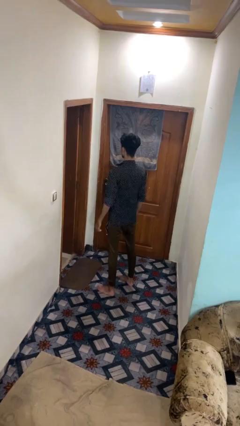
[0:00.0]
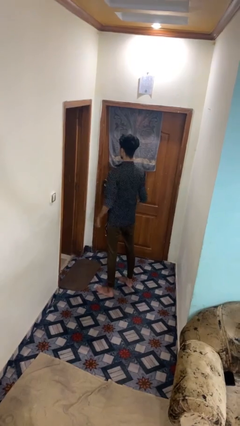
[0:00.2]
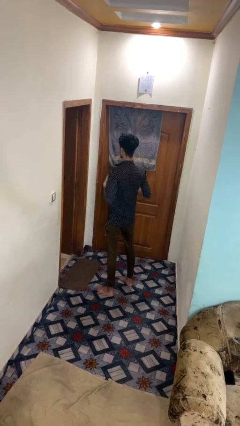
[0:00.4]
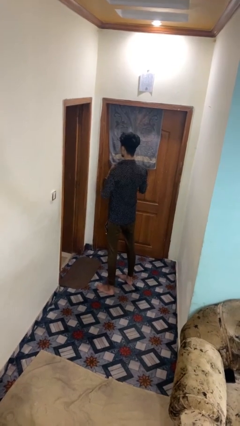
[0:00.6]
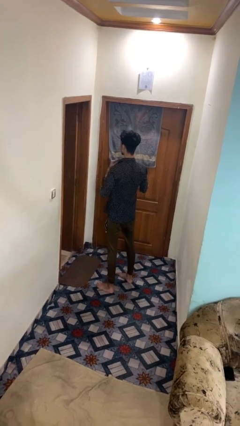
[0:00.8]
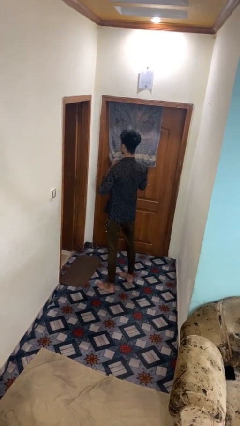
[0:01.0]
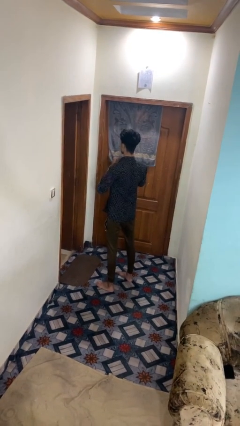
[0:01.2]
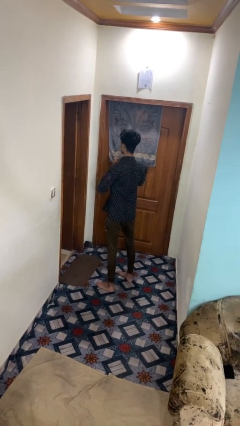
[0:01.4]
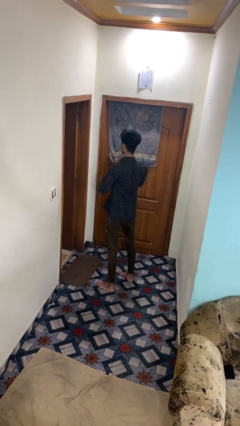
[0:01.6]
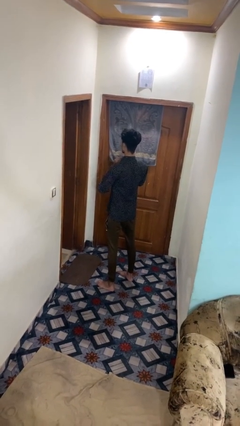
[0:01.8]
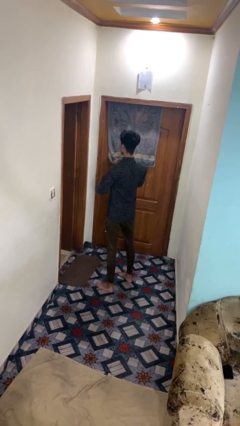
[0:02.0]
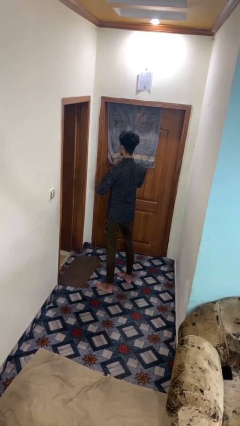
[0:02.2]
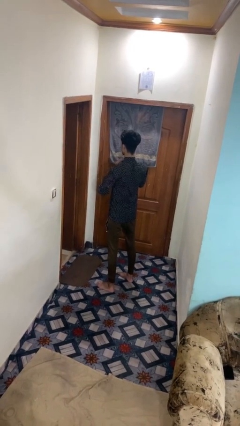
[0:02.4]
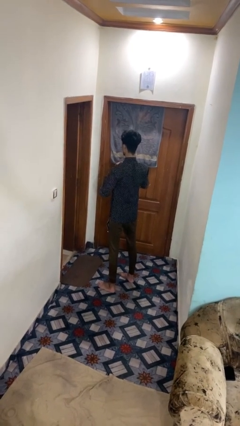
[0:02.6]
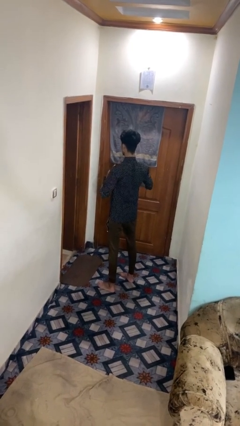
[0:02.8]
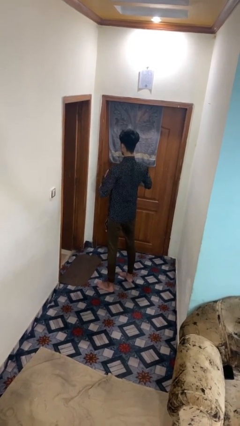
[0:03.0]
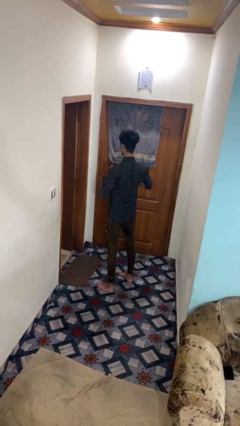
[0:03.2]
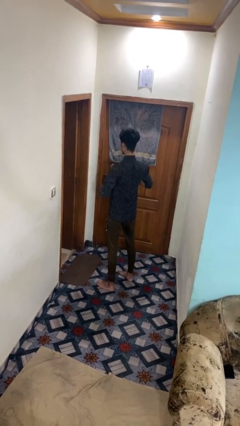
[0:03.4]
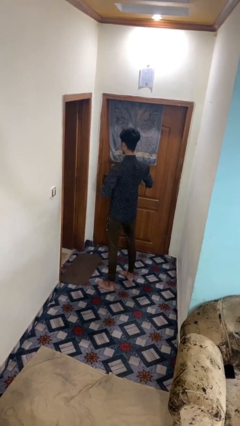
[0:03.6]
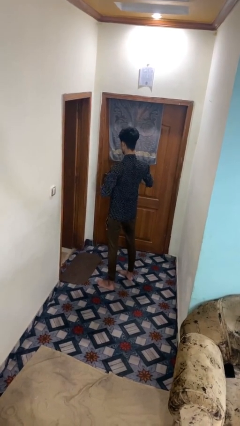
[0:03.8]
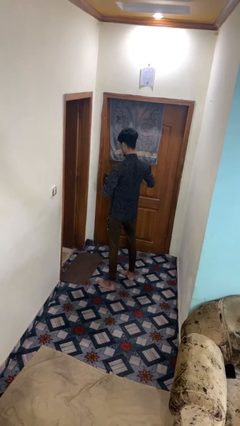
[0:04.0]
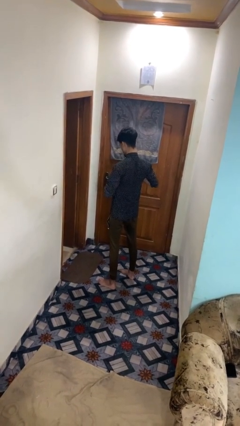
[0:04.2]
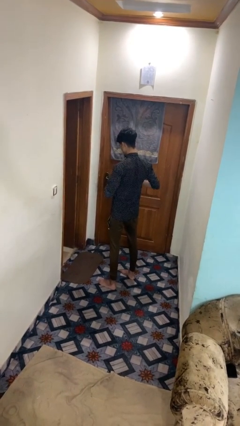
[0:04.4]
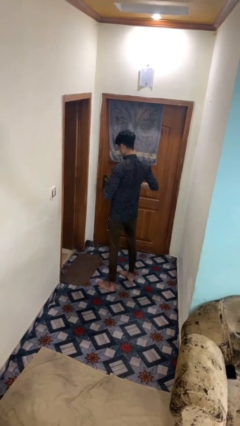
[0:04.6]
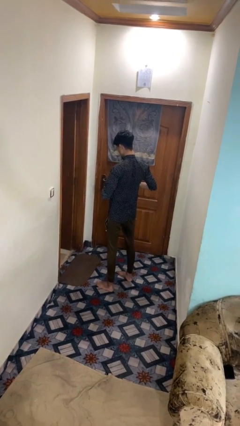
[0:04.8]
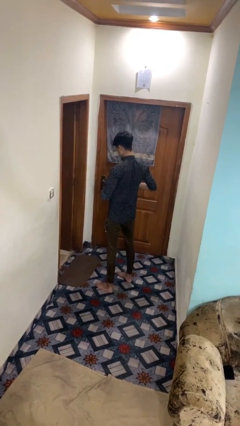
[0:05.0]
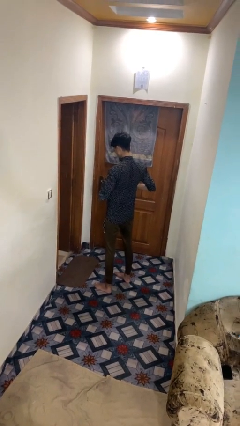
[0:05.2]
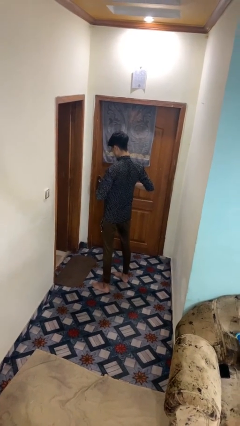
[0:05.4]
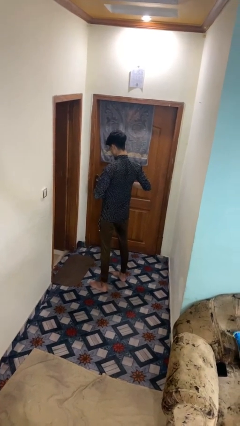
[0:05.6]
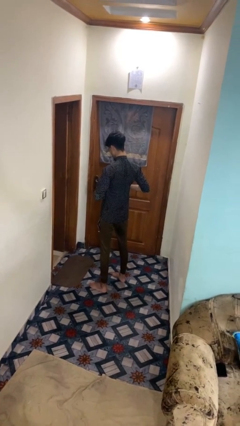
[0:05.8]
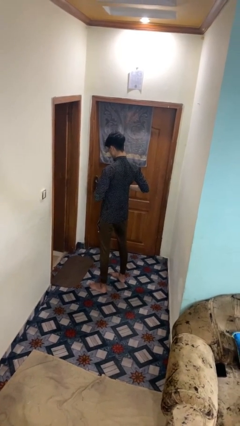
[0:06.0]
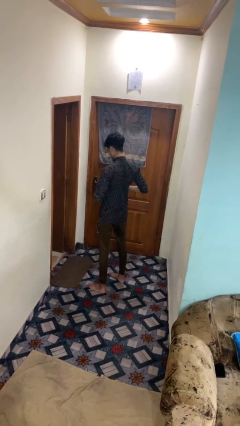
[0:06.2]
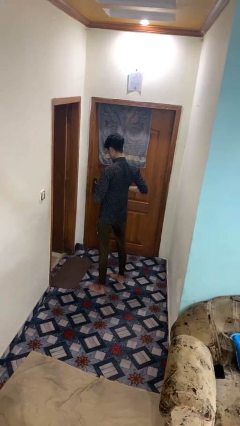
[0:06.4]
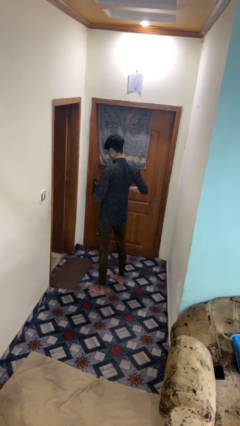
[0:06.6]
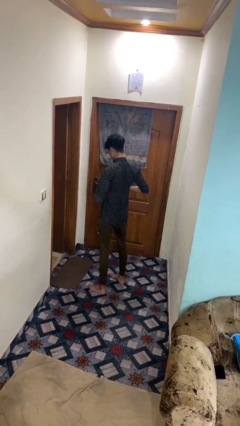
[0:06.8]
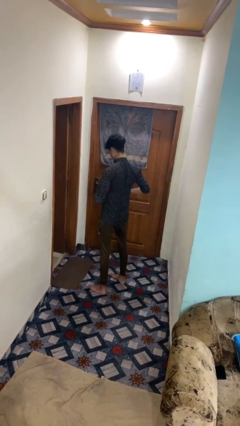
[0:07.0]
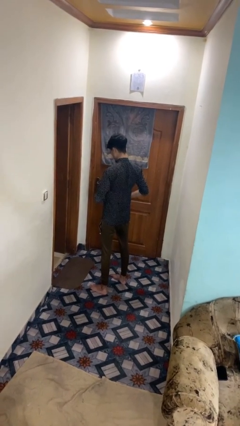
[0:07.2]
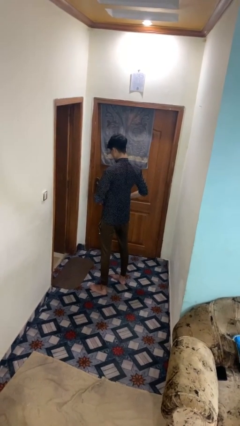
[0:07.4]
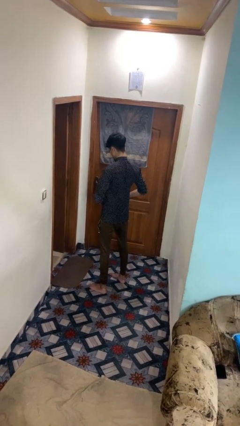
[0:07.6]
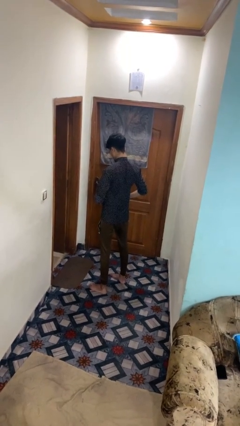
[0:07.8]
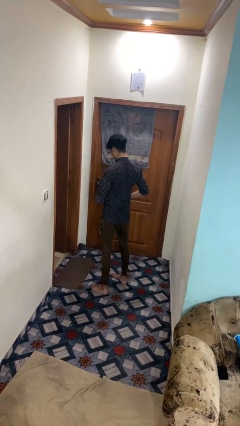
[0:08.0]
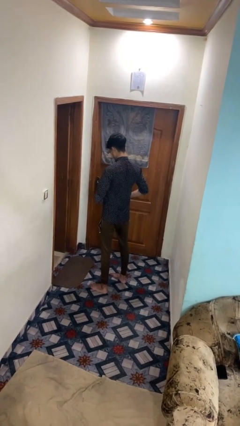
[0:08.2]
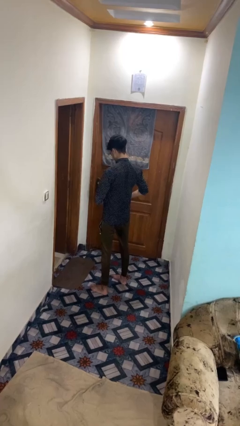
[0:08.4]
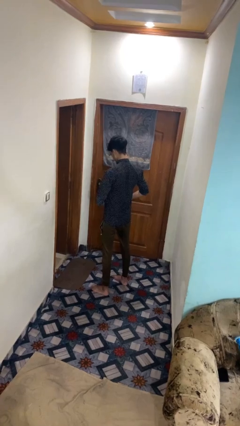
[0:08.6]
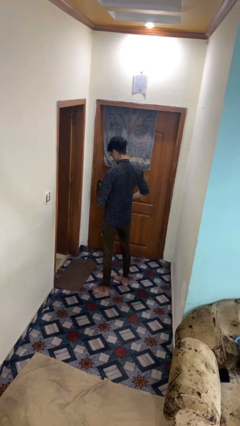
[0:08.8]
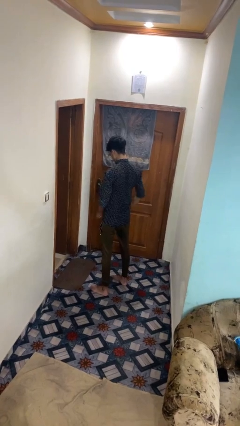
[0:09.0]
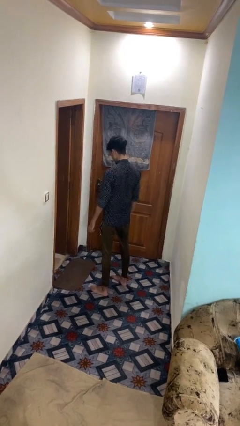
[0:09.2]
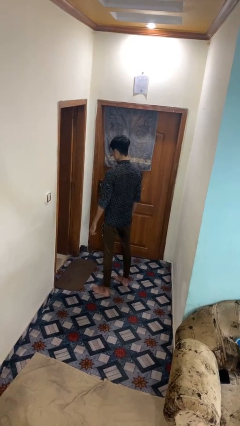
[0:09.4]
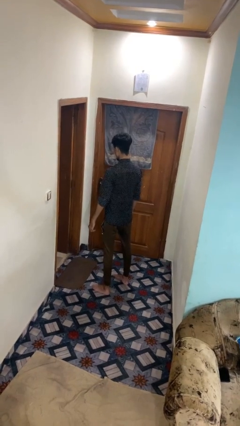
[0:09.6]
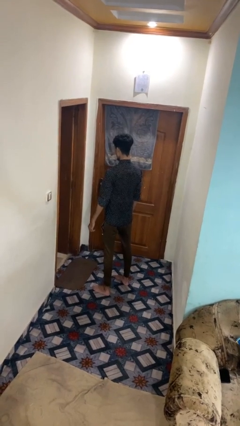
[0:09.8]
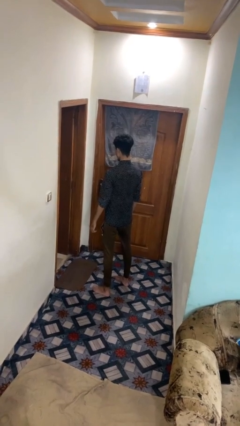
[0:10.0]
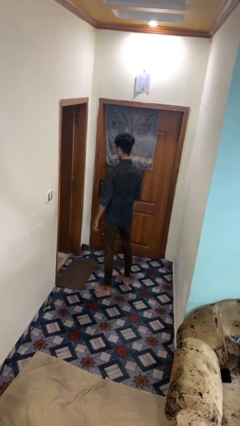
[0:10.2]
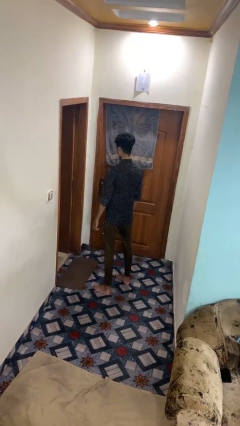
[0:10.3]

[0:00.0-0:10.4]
person buttons shirt

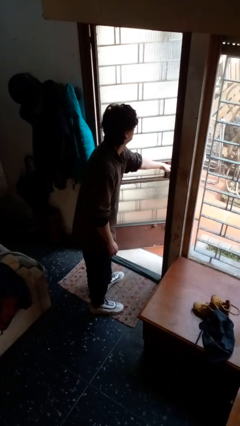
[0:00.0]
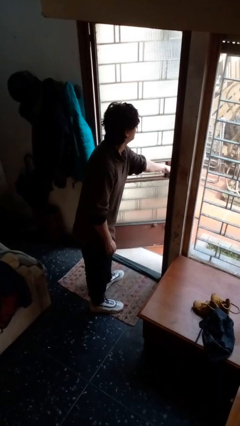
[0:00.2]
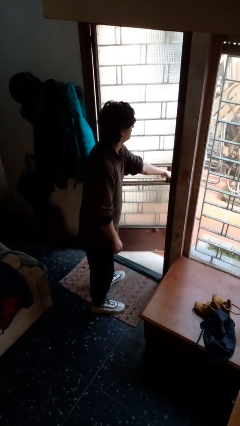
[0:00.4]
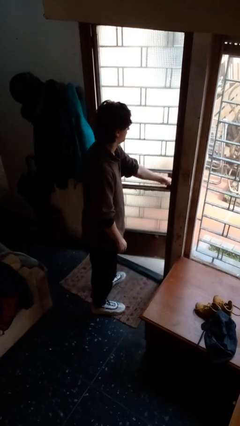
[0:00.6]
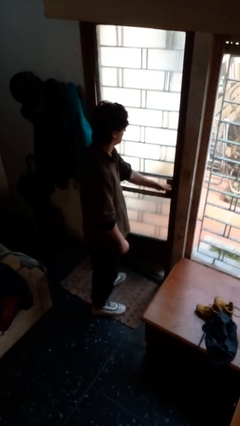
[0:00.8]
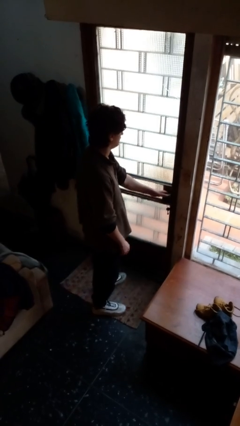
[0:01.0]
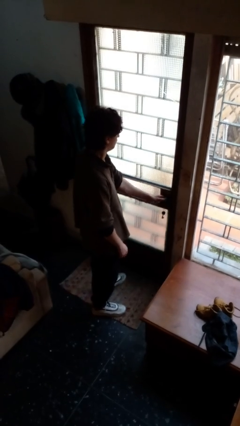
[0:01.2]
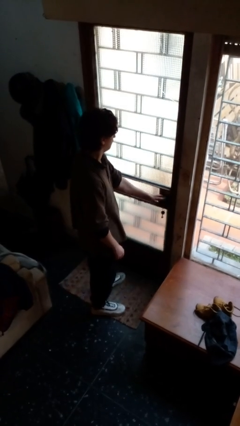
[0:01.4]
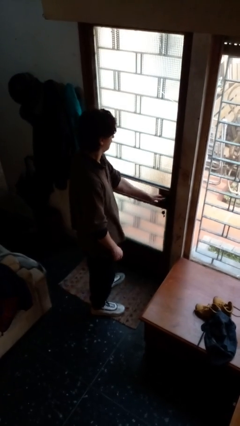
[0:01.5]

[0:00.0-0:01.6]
person closes facility door

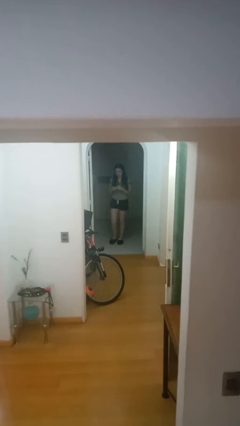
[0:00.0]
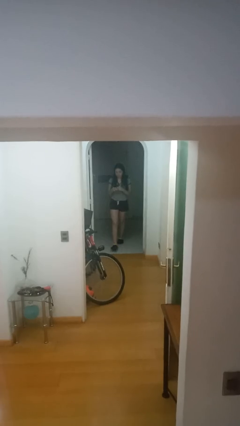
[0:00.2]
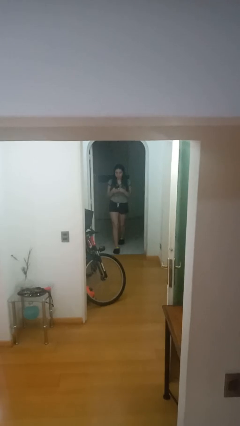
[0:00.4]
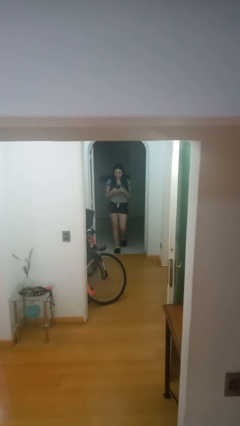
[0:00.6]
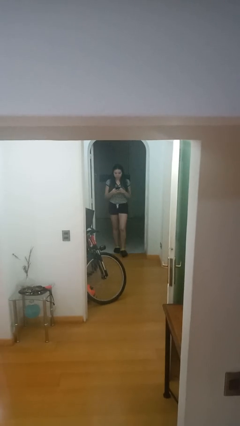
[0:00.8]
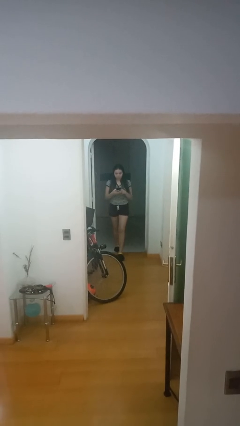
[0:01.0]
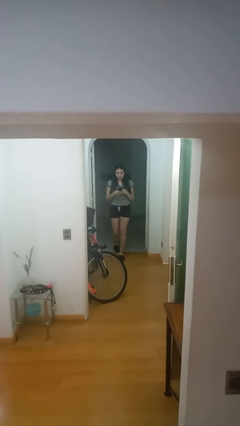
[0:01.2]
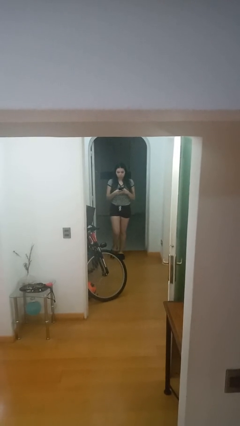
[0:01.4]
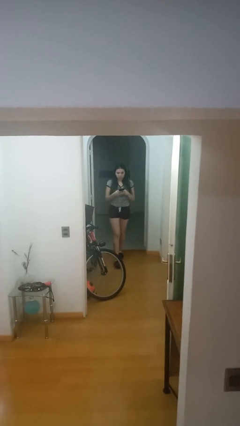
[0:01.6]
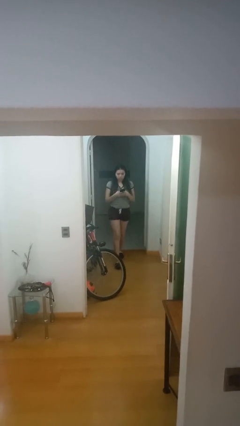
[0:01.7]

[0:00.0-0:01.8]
person enters scene through structure

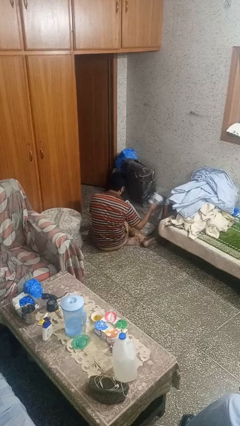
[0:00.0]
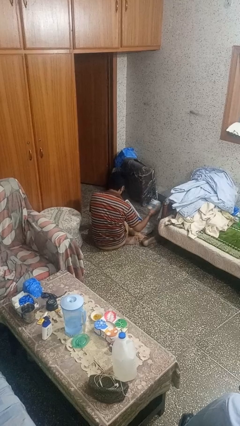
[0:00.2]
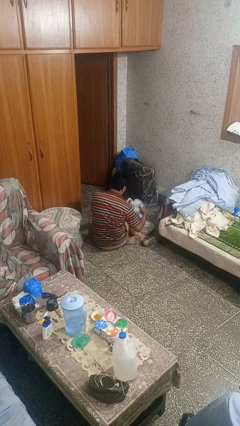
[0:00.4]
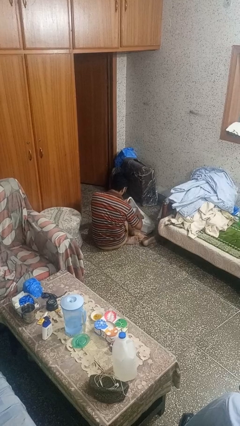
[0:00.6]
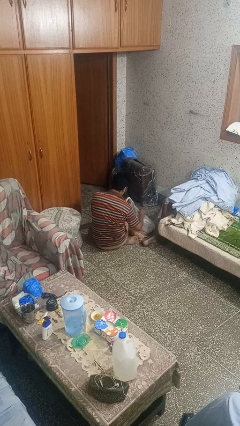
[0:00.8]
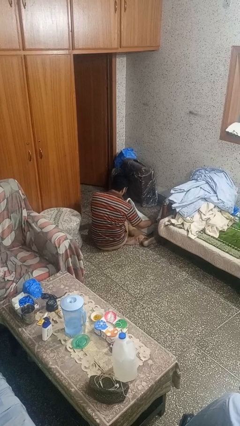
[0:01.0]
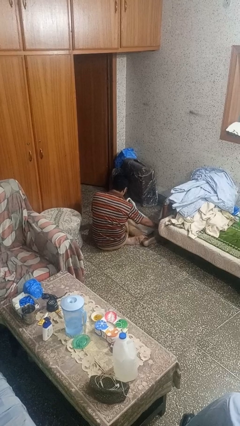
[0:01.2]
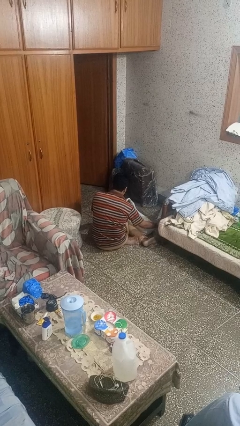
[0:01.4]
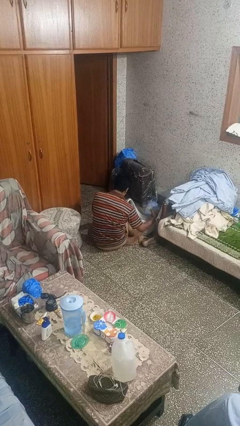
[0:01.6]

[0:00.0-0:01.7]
person puts object into bag

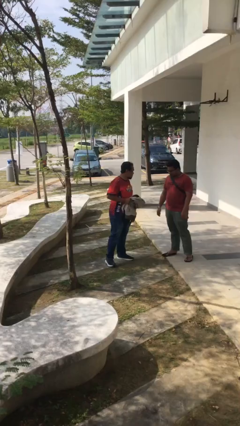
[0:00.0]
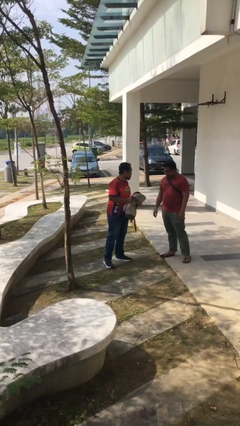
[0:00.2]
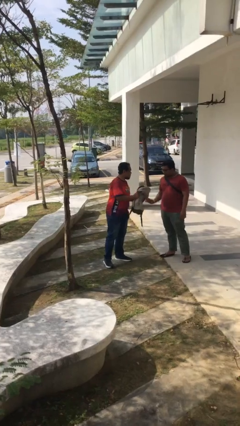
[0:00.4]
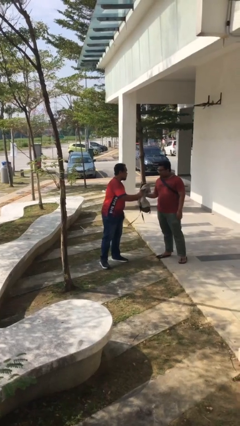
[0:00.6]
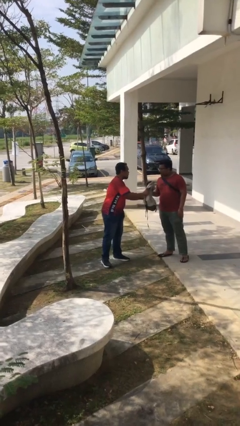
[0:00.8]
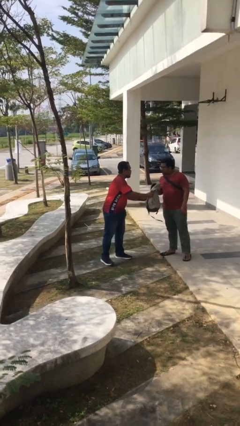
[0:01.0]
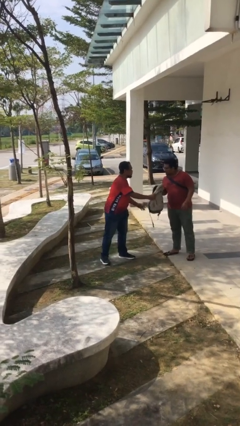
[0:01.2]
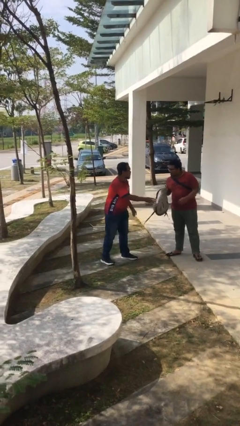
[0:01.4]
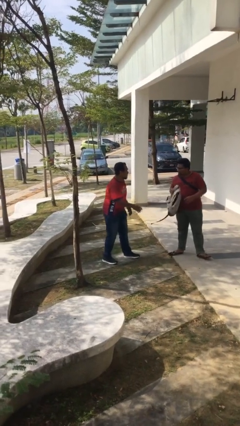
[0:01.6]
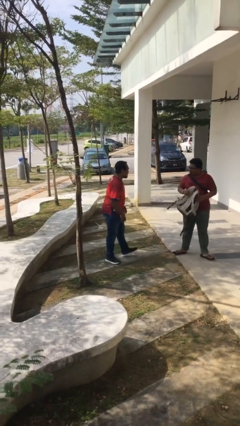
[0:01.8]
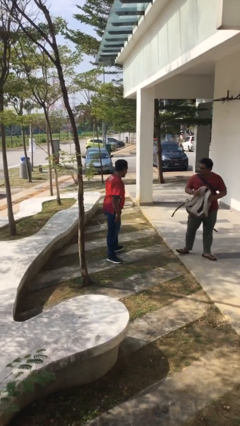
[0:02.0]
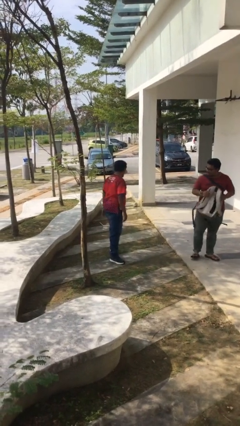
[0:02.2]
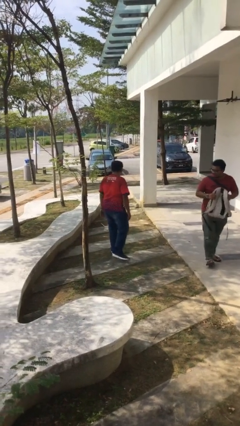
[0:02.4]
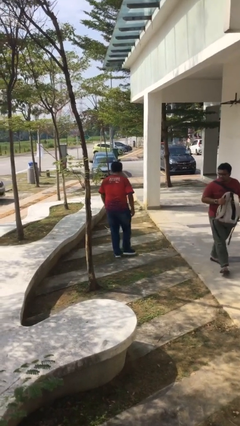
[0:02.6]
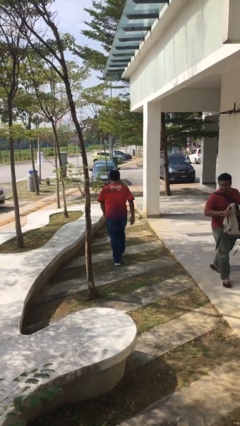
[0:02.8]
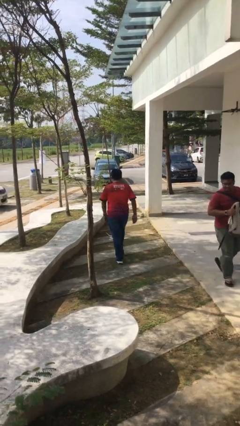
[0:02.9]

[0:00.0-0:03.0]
person transfers object to person
